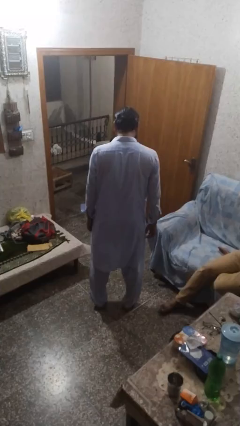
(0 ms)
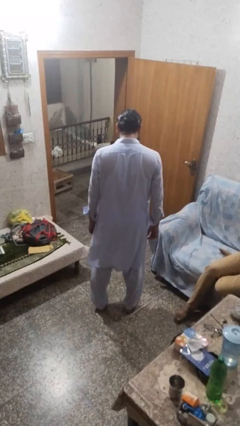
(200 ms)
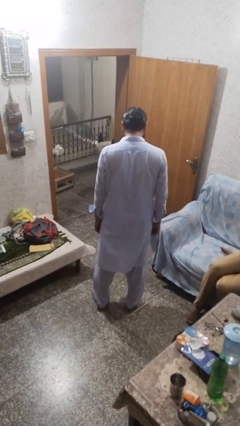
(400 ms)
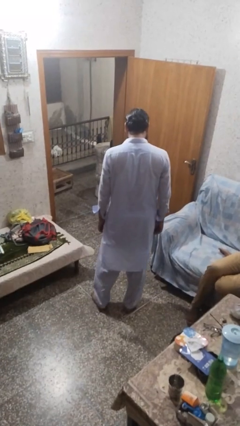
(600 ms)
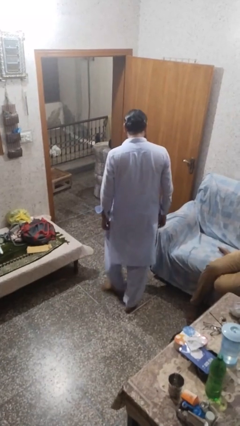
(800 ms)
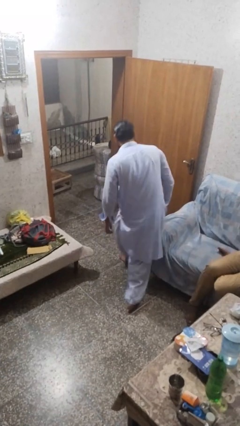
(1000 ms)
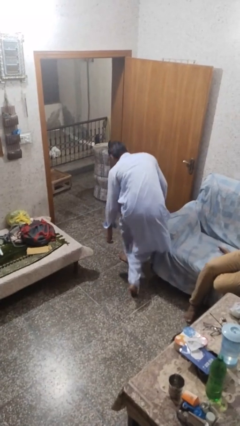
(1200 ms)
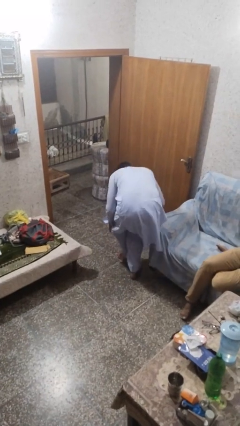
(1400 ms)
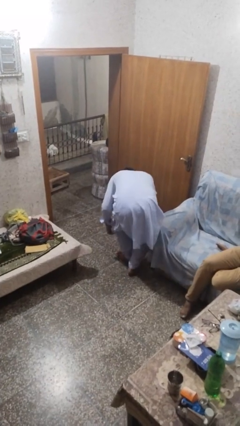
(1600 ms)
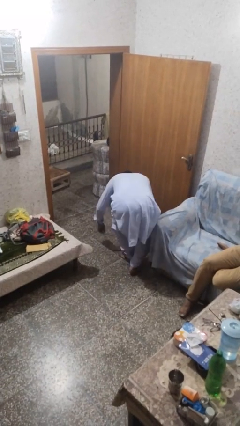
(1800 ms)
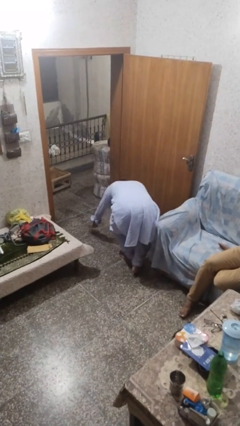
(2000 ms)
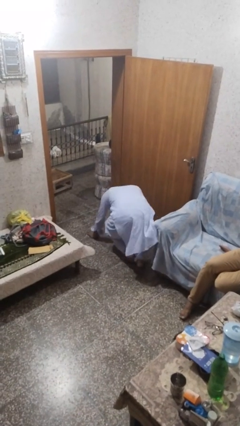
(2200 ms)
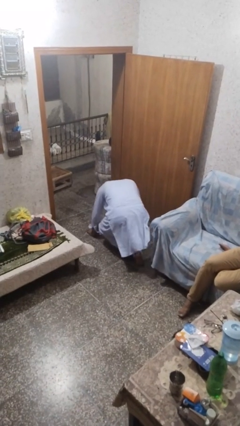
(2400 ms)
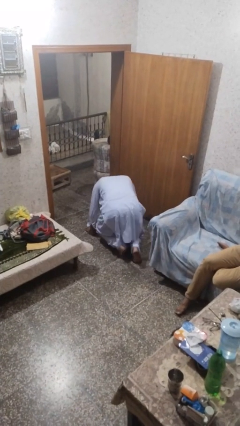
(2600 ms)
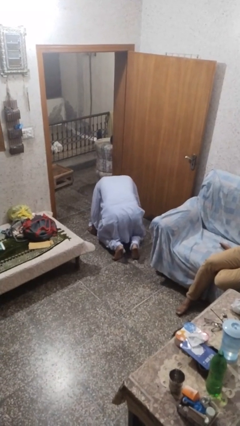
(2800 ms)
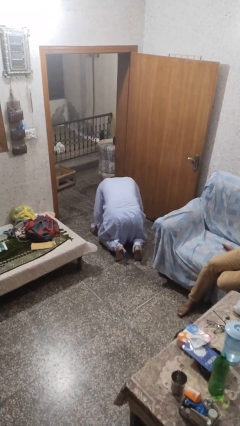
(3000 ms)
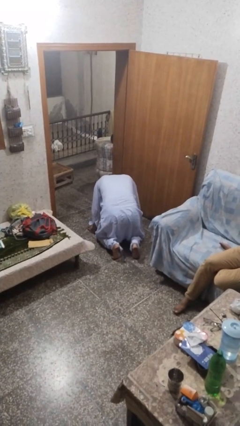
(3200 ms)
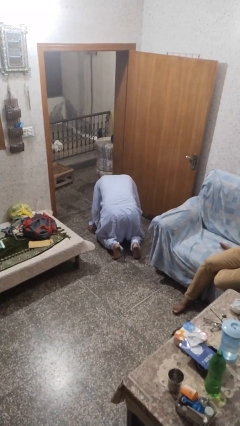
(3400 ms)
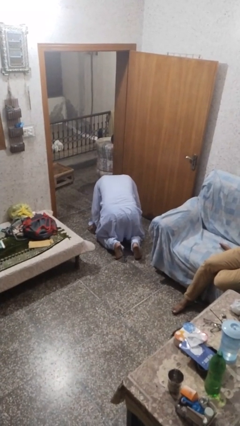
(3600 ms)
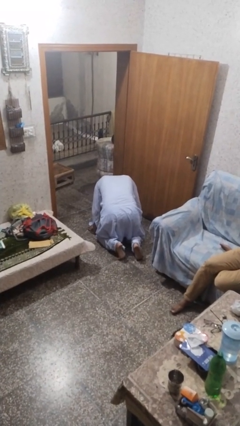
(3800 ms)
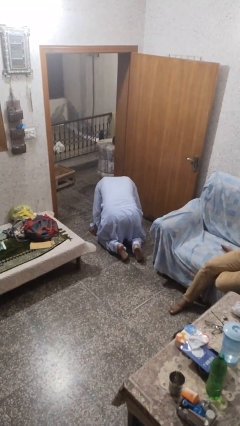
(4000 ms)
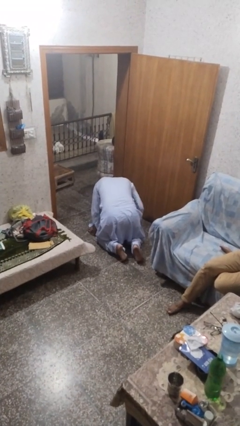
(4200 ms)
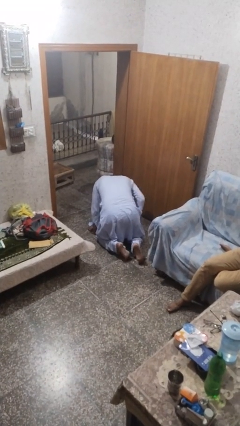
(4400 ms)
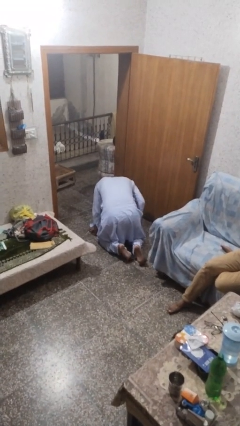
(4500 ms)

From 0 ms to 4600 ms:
person trips on object on floor

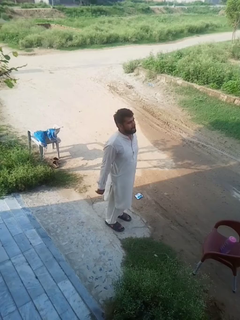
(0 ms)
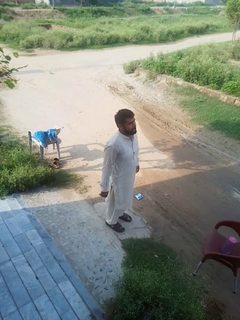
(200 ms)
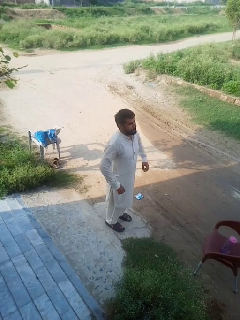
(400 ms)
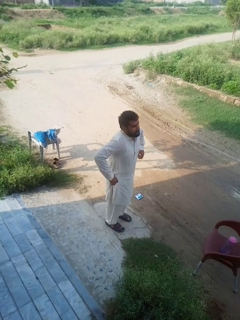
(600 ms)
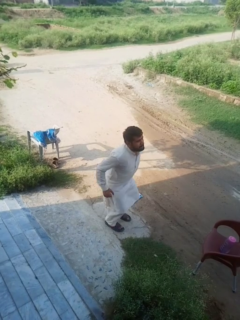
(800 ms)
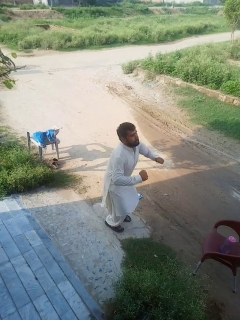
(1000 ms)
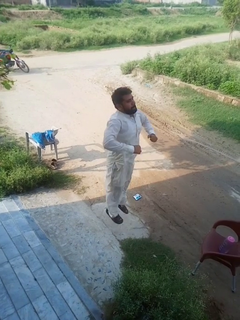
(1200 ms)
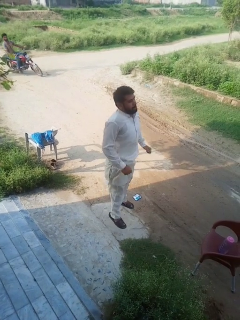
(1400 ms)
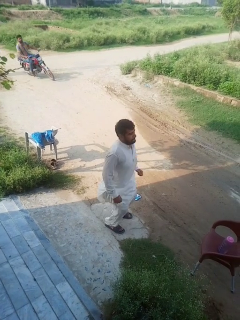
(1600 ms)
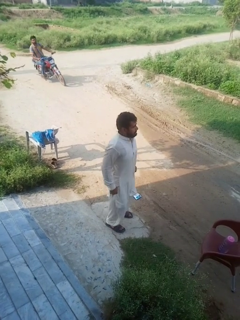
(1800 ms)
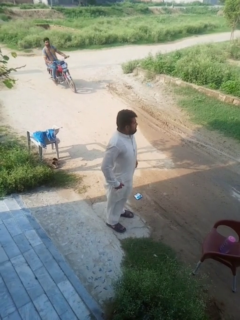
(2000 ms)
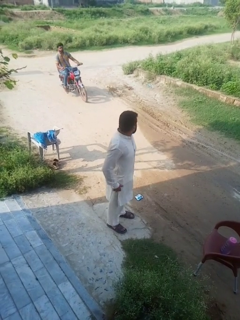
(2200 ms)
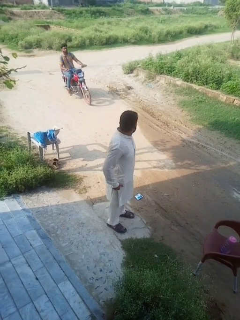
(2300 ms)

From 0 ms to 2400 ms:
person jumps

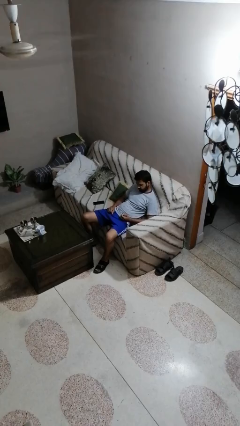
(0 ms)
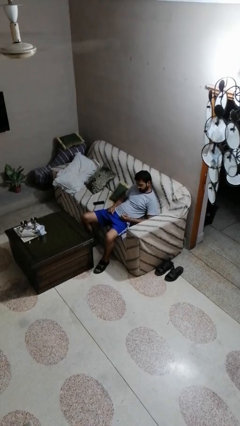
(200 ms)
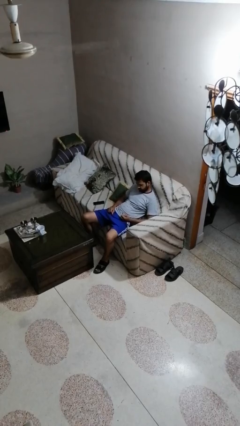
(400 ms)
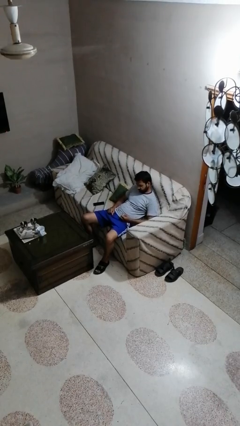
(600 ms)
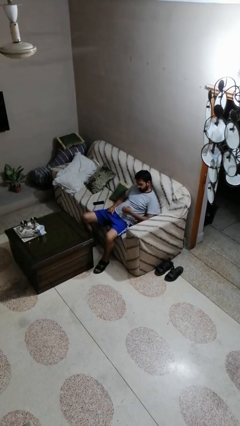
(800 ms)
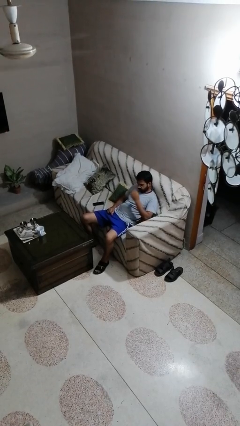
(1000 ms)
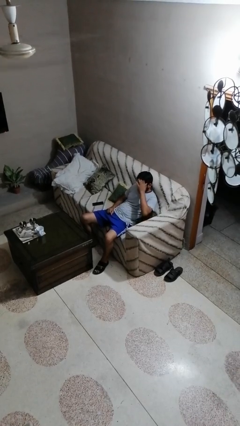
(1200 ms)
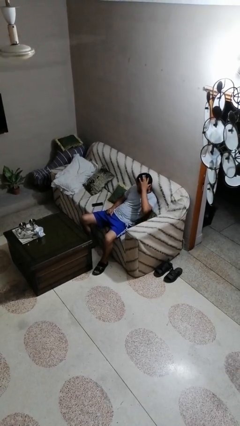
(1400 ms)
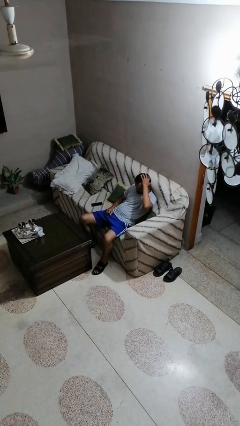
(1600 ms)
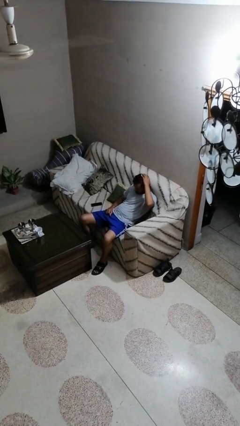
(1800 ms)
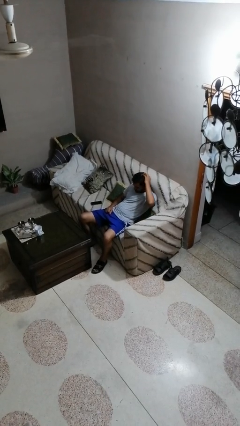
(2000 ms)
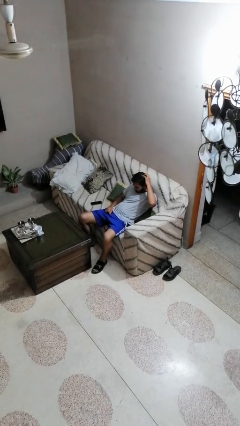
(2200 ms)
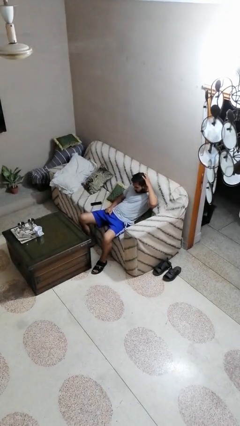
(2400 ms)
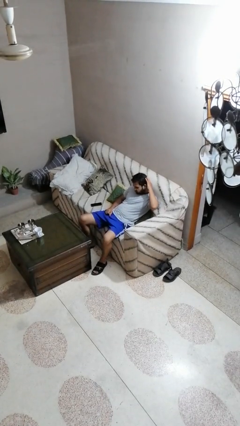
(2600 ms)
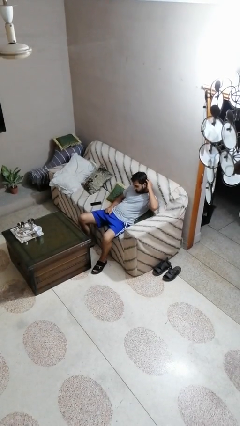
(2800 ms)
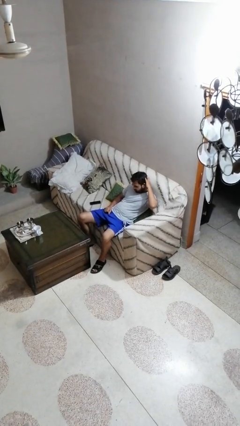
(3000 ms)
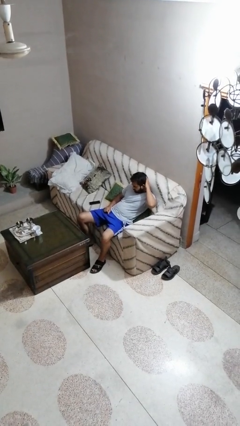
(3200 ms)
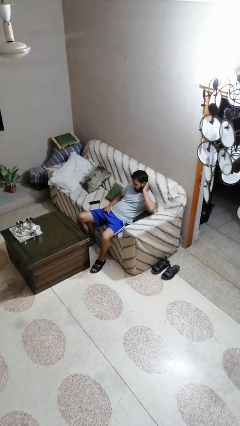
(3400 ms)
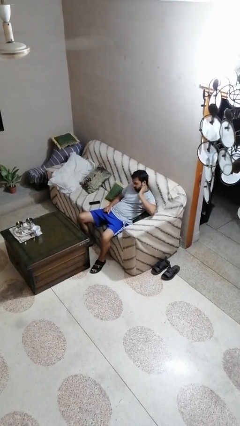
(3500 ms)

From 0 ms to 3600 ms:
person strokes hair

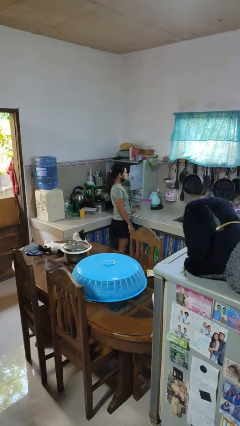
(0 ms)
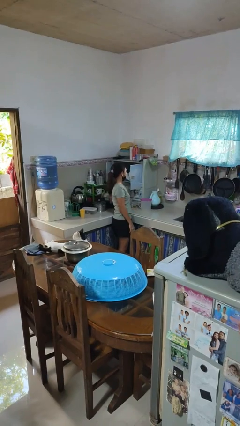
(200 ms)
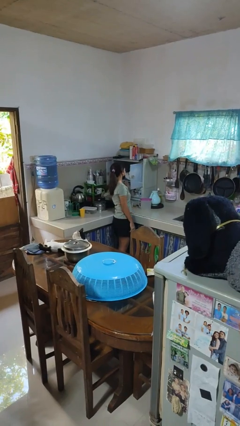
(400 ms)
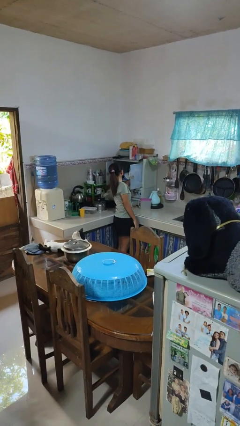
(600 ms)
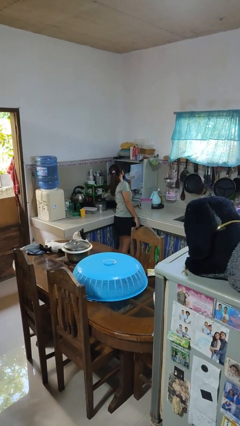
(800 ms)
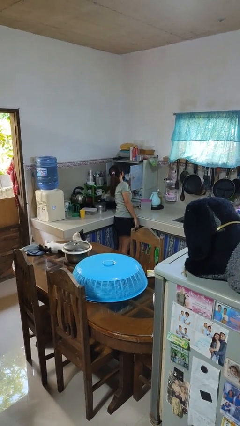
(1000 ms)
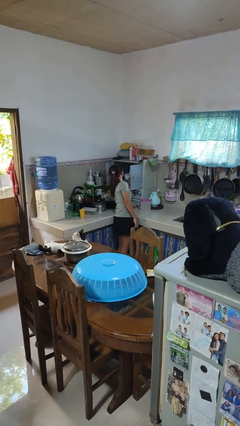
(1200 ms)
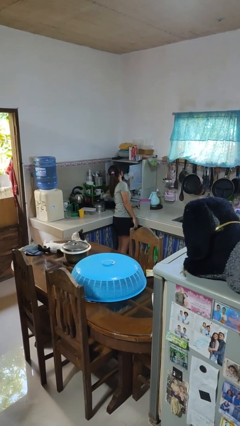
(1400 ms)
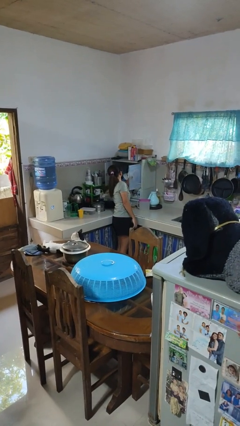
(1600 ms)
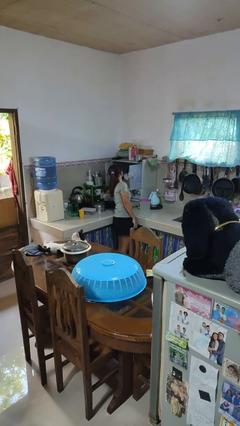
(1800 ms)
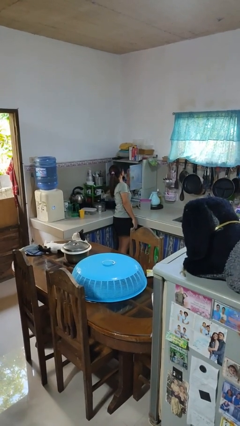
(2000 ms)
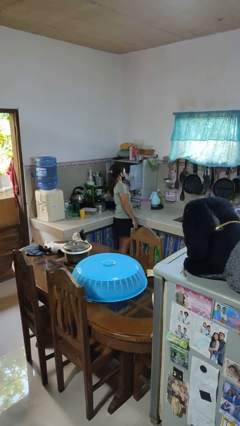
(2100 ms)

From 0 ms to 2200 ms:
person searches in kitchen drawer

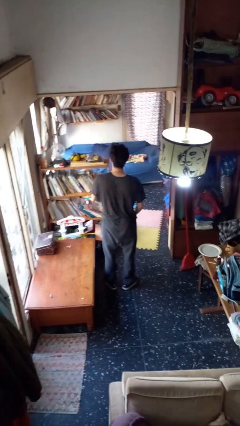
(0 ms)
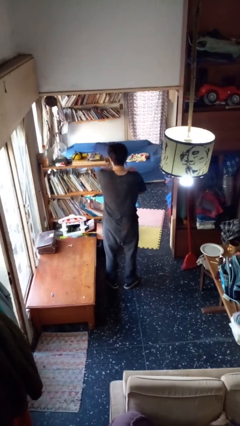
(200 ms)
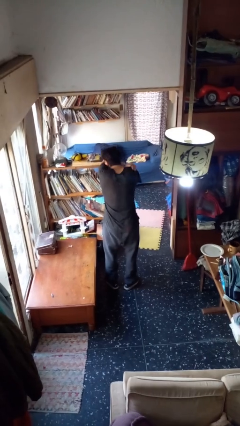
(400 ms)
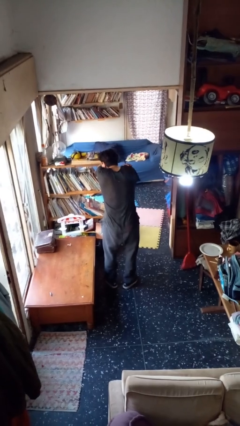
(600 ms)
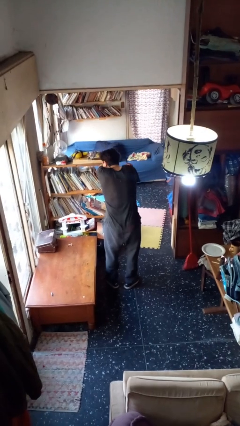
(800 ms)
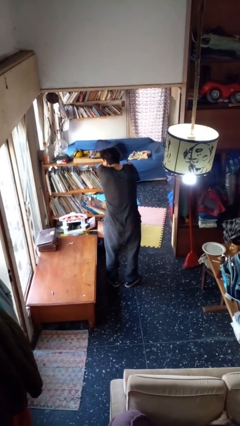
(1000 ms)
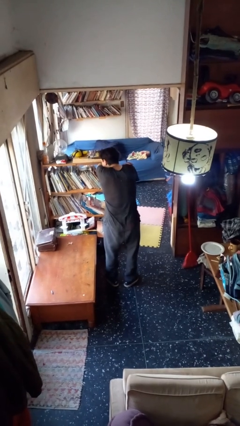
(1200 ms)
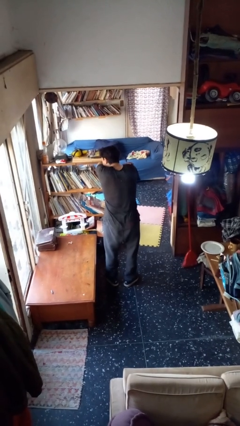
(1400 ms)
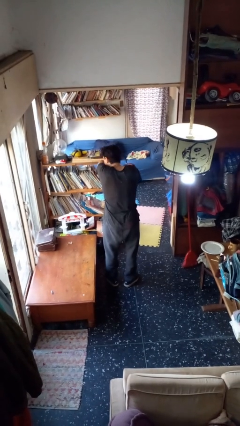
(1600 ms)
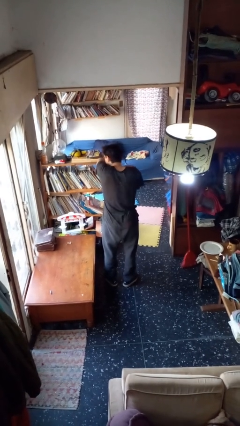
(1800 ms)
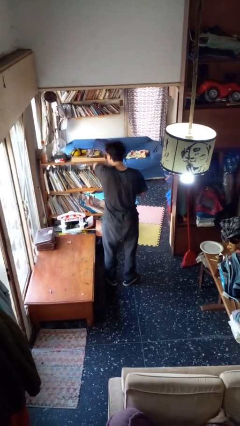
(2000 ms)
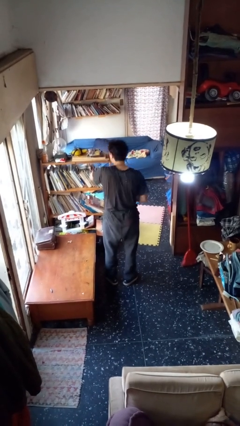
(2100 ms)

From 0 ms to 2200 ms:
person sneezes into arm

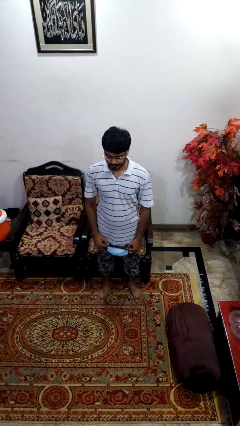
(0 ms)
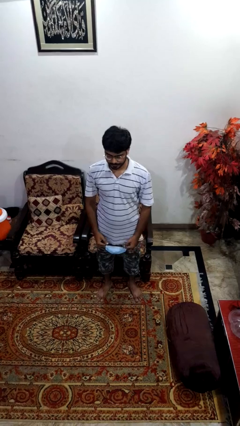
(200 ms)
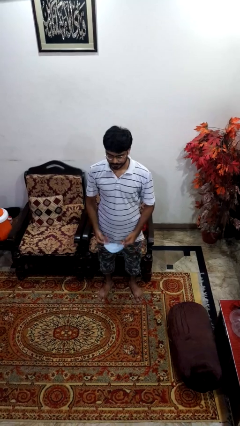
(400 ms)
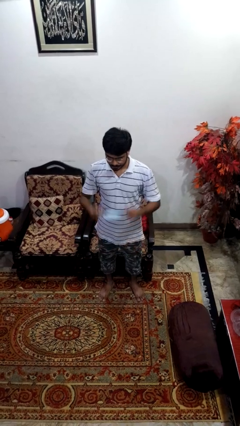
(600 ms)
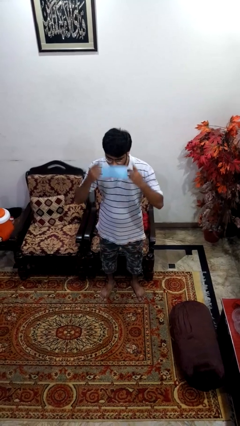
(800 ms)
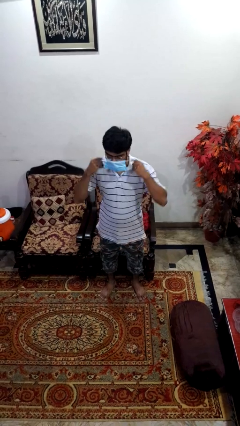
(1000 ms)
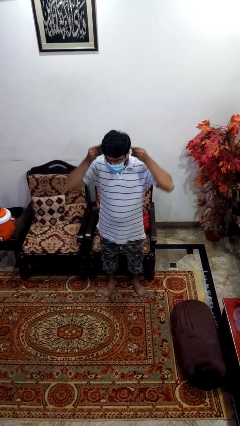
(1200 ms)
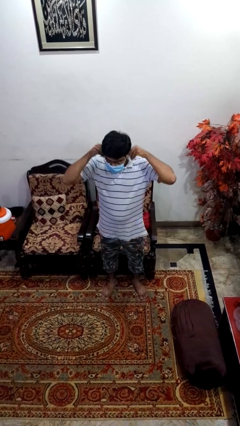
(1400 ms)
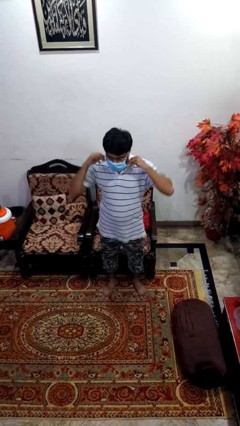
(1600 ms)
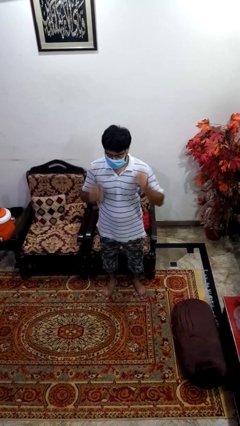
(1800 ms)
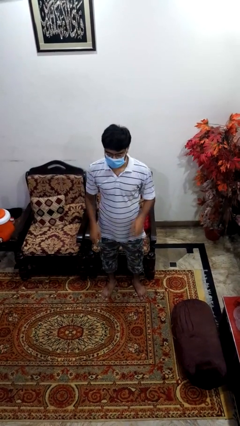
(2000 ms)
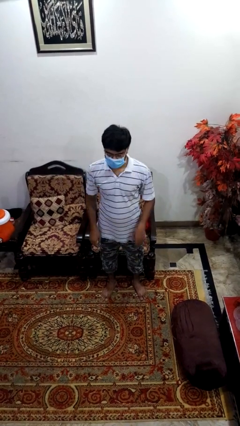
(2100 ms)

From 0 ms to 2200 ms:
person puts on facemask

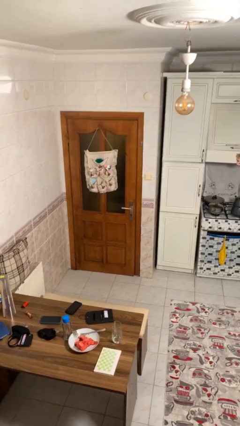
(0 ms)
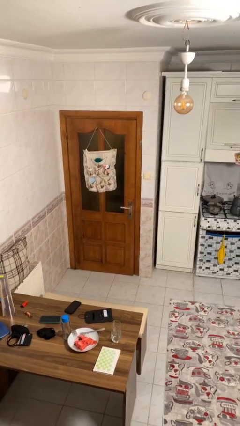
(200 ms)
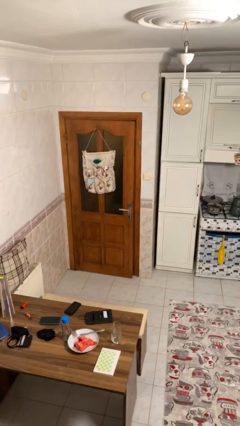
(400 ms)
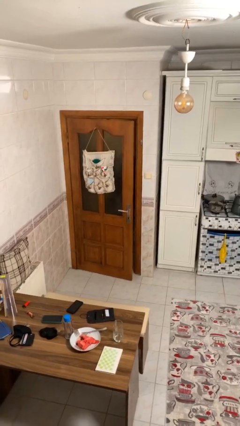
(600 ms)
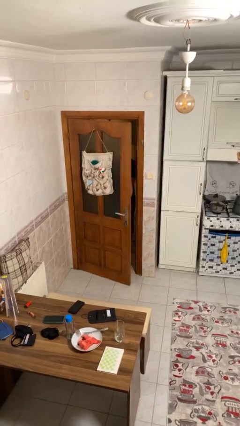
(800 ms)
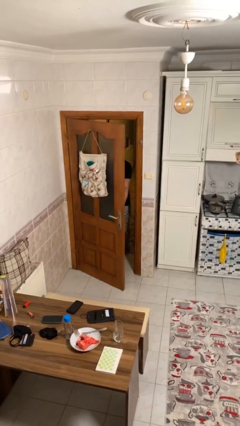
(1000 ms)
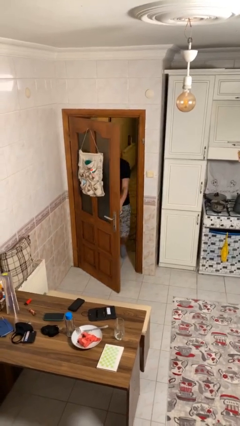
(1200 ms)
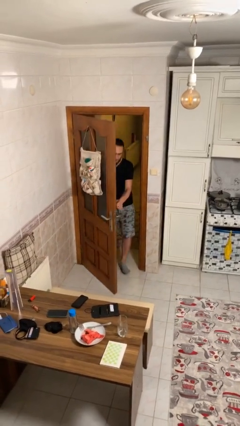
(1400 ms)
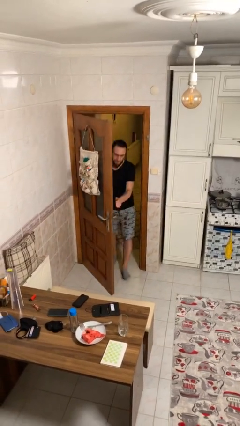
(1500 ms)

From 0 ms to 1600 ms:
person opens facility door
